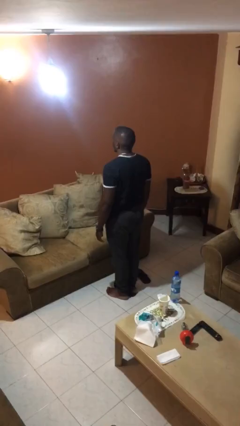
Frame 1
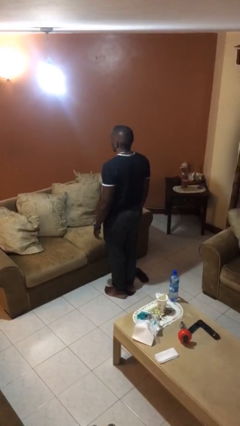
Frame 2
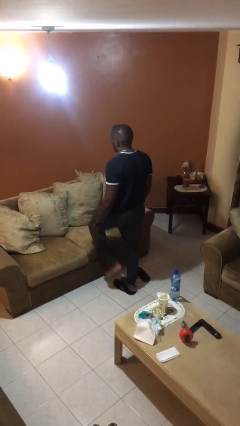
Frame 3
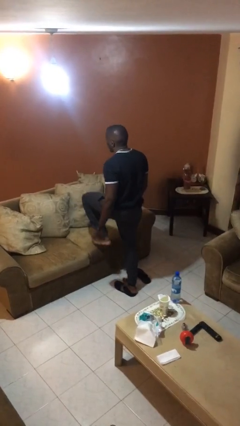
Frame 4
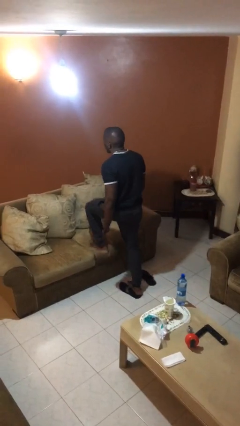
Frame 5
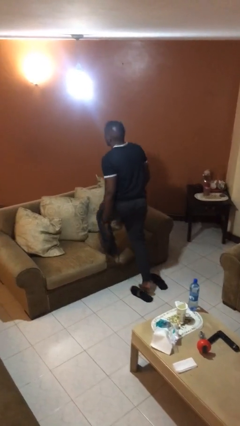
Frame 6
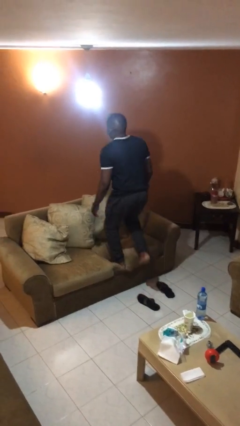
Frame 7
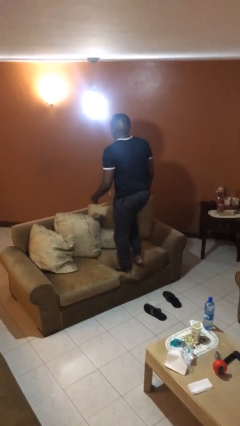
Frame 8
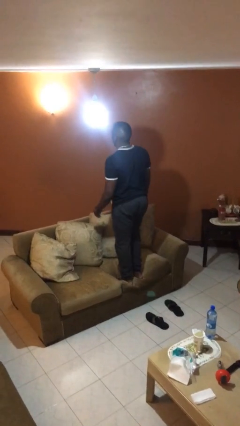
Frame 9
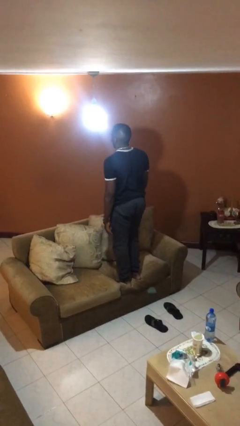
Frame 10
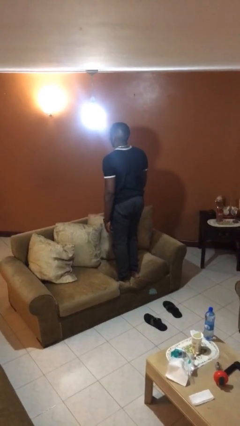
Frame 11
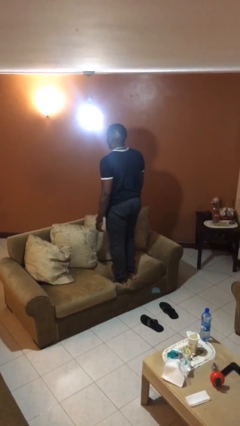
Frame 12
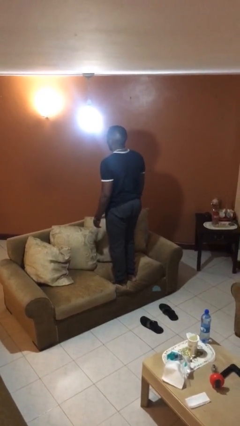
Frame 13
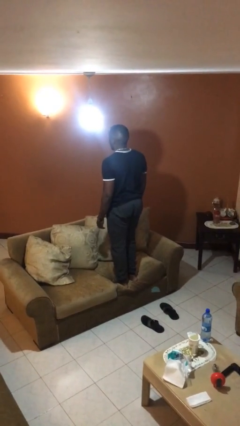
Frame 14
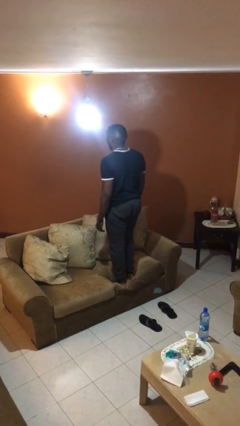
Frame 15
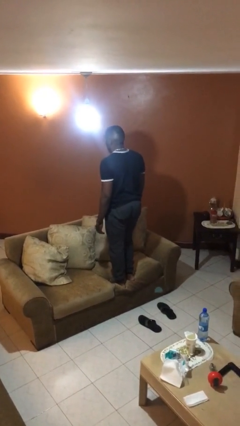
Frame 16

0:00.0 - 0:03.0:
person climbs on chair

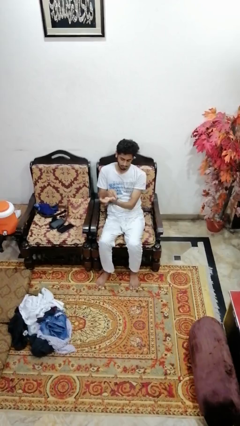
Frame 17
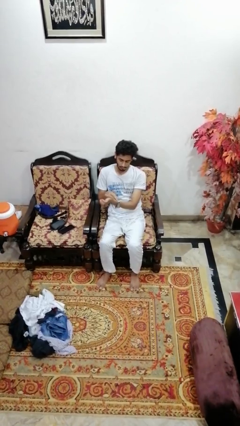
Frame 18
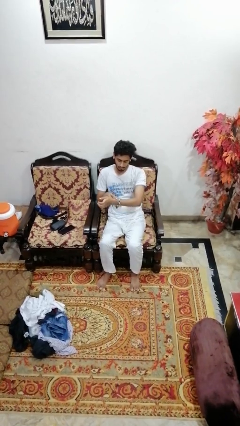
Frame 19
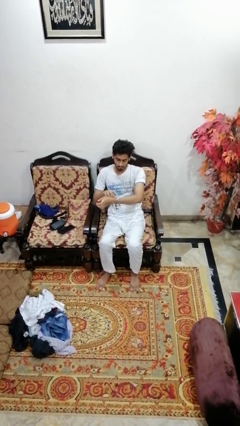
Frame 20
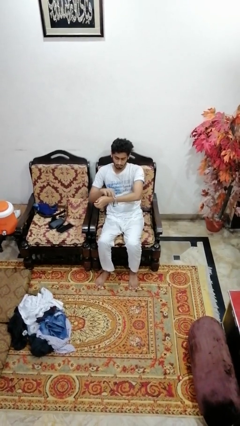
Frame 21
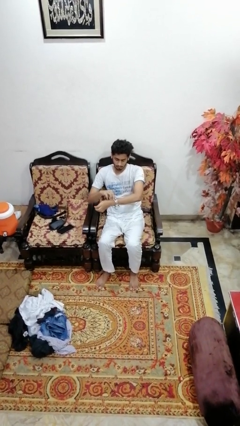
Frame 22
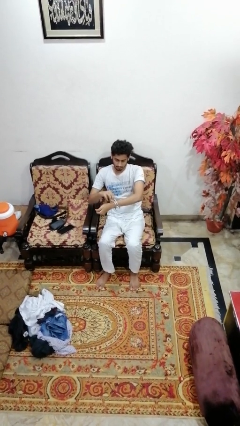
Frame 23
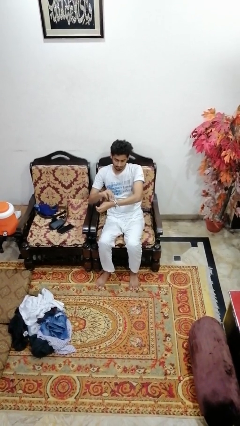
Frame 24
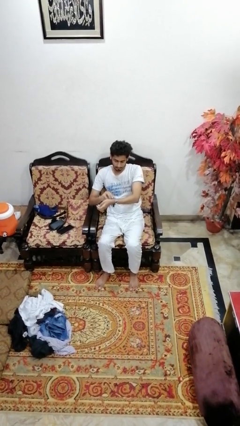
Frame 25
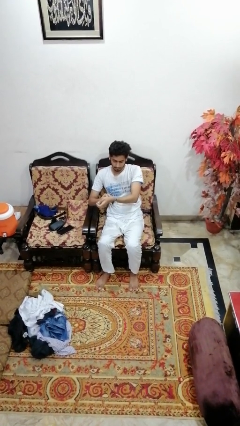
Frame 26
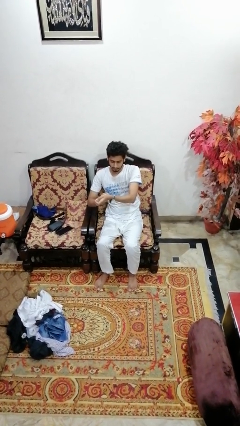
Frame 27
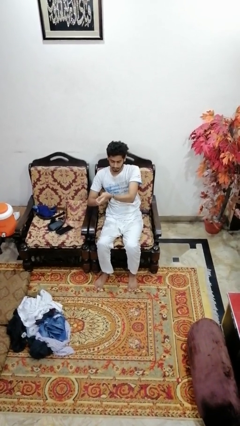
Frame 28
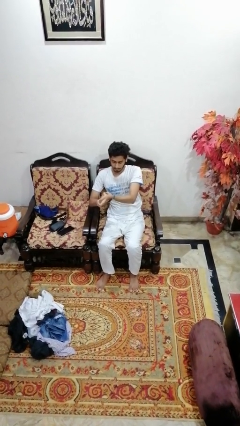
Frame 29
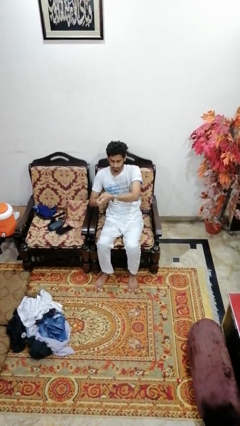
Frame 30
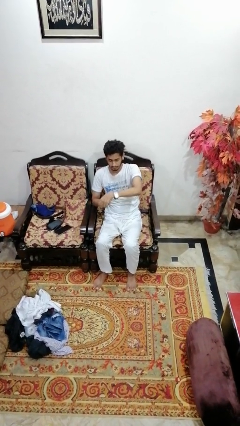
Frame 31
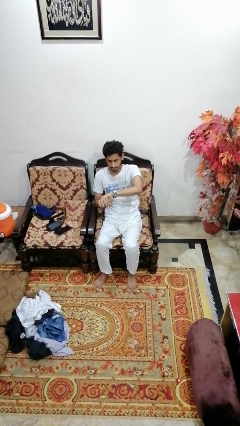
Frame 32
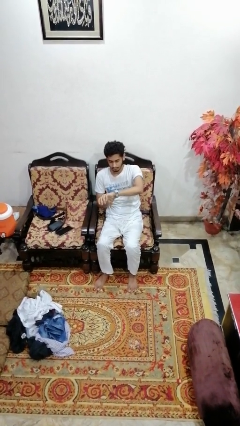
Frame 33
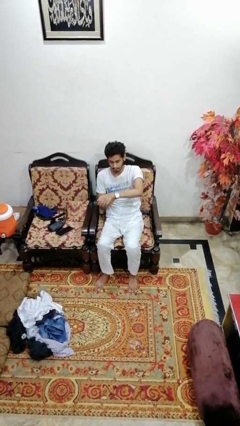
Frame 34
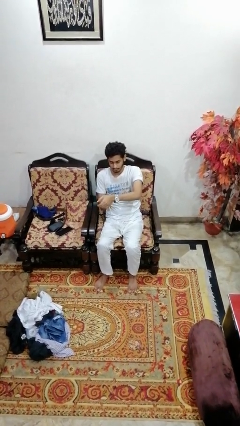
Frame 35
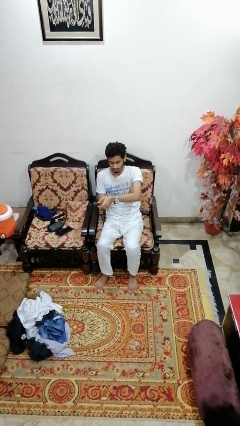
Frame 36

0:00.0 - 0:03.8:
person puts on wristwatch

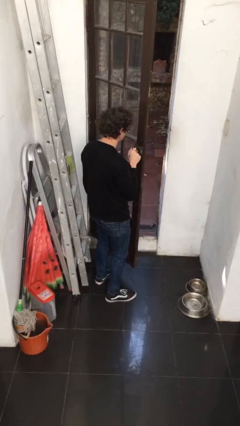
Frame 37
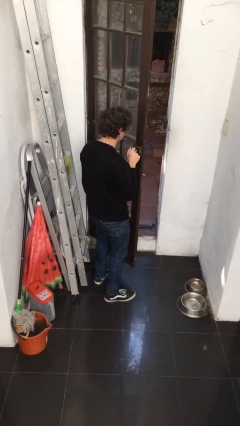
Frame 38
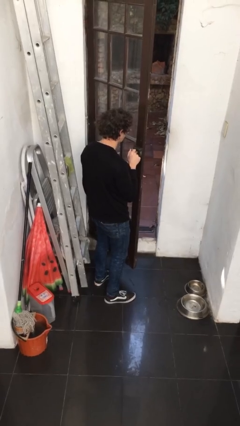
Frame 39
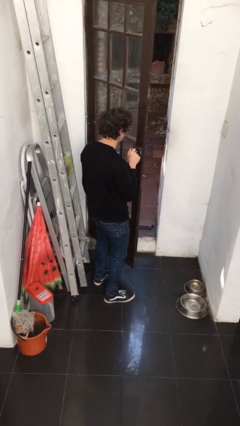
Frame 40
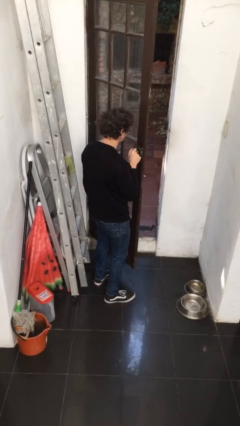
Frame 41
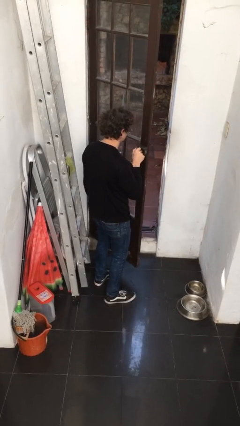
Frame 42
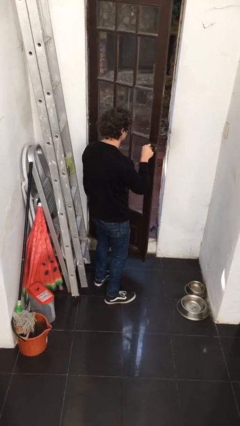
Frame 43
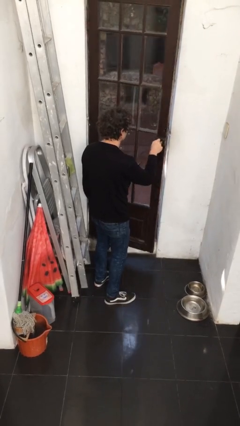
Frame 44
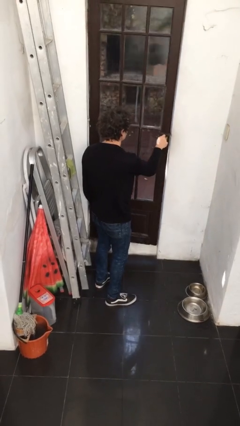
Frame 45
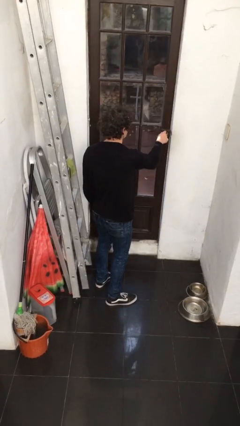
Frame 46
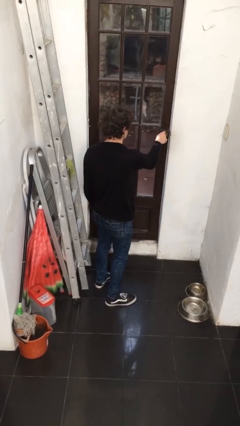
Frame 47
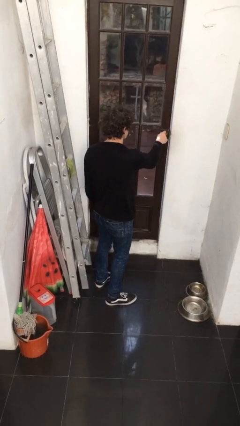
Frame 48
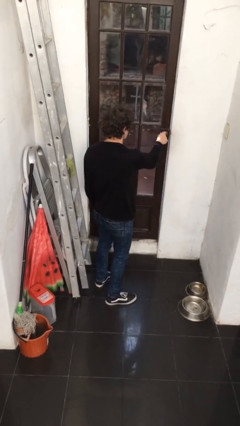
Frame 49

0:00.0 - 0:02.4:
person closes facility door

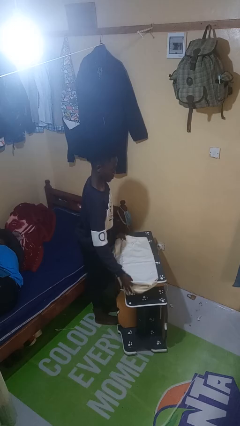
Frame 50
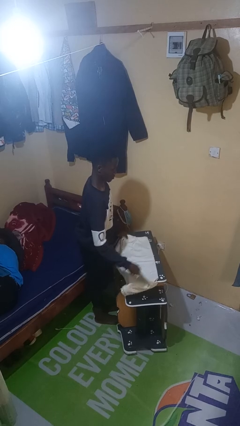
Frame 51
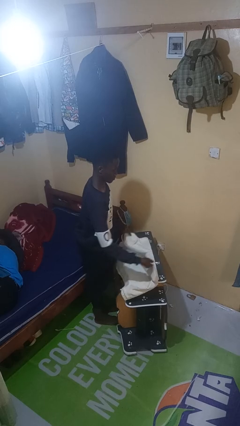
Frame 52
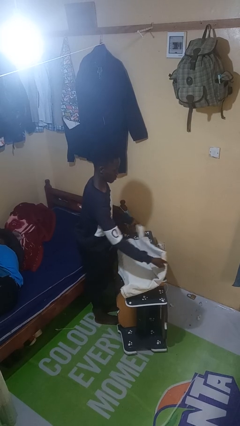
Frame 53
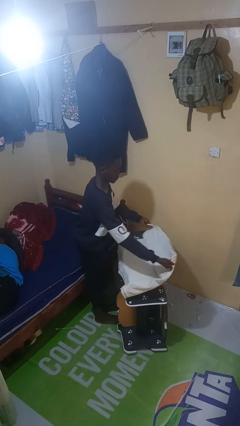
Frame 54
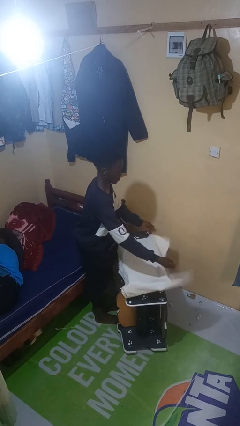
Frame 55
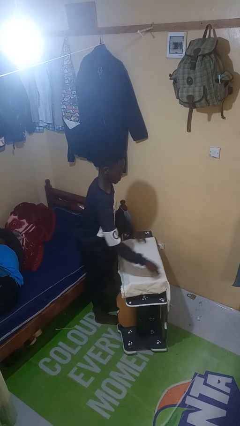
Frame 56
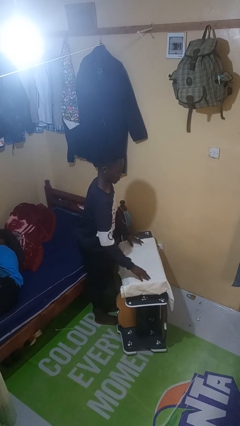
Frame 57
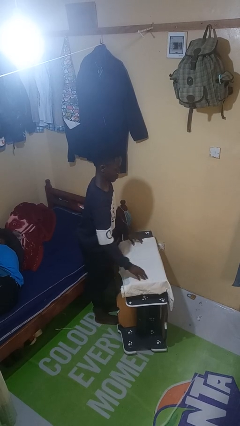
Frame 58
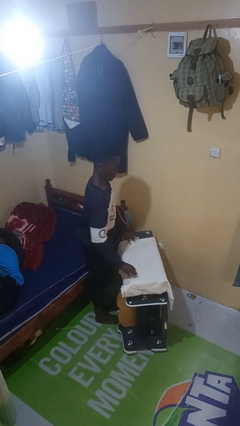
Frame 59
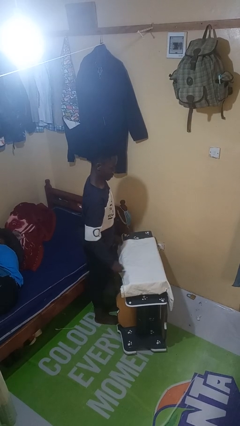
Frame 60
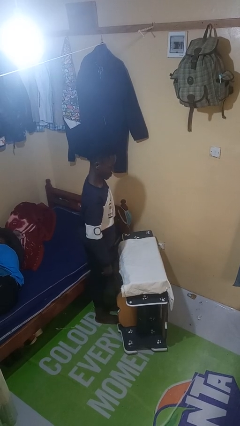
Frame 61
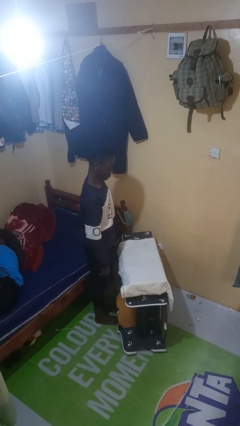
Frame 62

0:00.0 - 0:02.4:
person spreads tablecloth

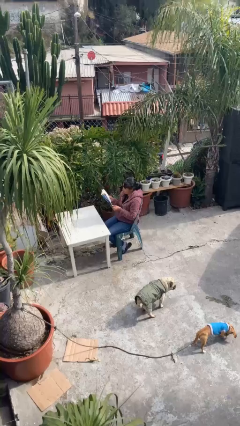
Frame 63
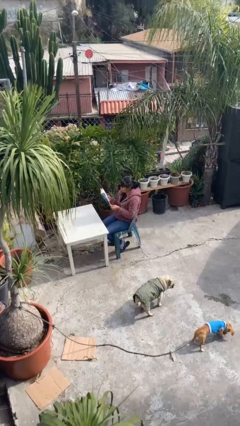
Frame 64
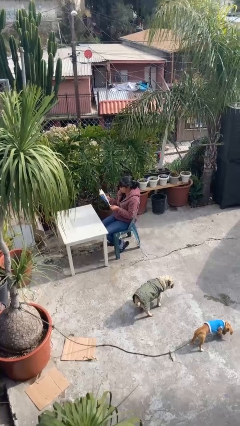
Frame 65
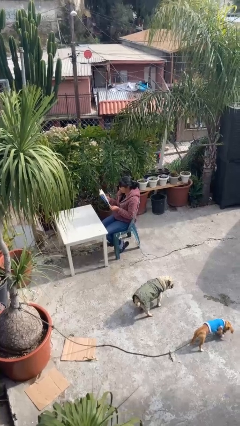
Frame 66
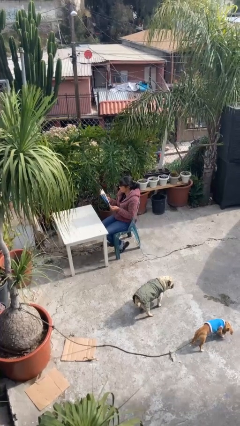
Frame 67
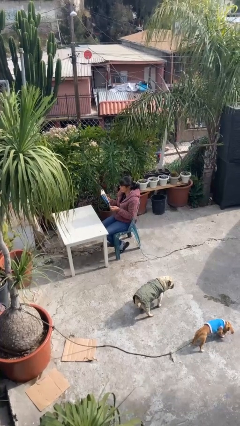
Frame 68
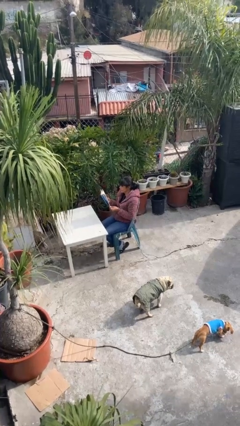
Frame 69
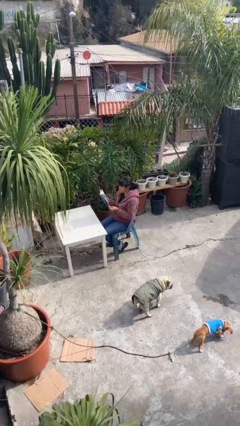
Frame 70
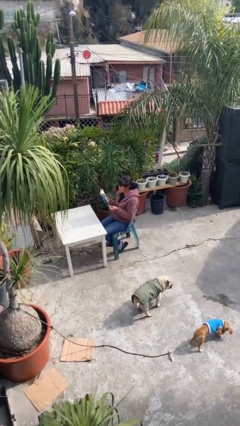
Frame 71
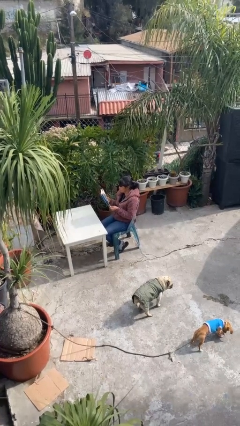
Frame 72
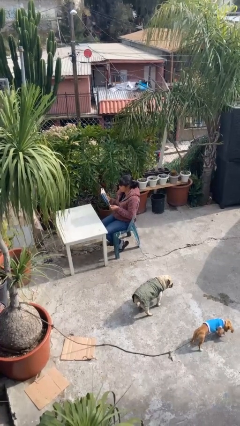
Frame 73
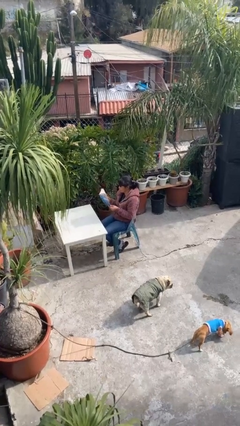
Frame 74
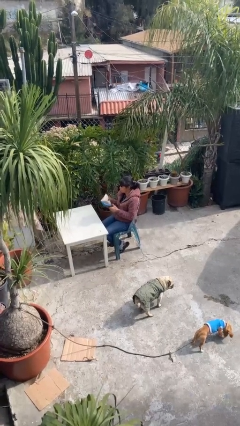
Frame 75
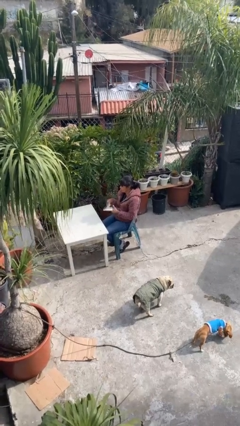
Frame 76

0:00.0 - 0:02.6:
person reads document

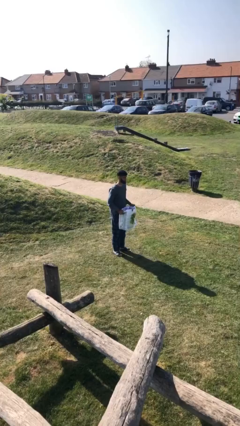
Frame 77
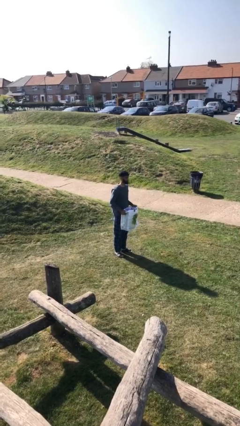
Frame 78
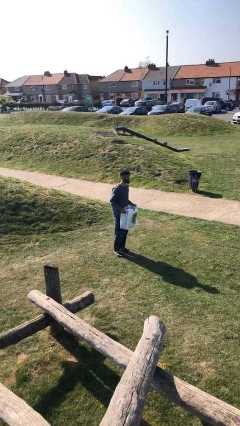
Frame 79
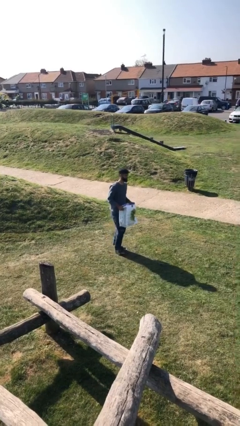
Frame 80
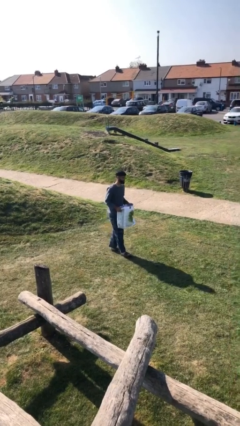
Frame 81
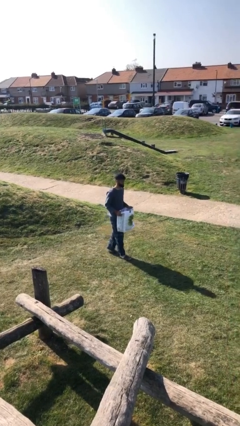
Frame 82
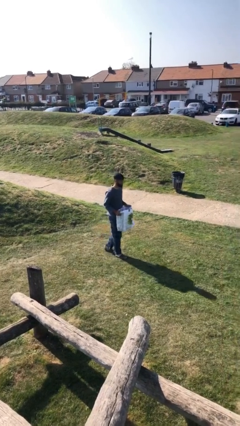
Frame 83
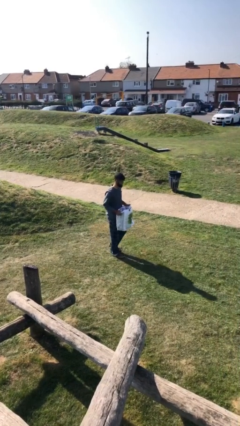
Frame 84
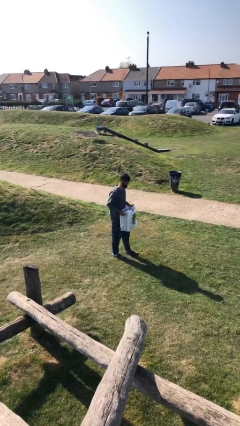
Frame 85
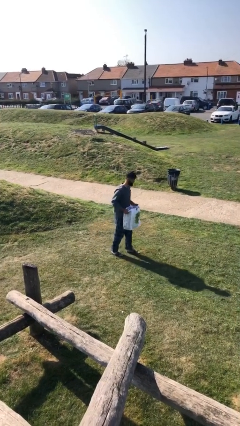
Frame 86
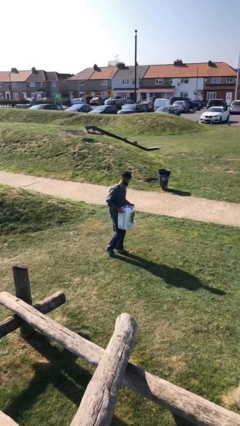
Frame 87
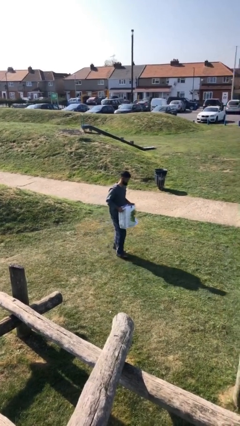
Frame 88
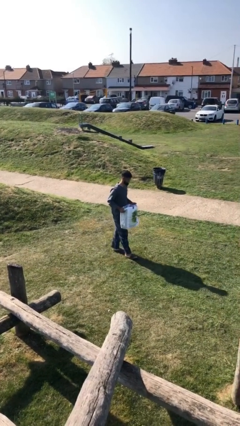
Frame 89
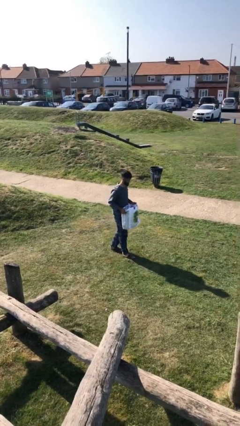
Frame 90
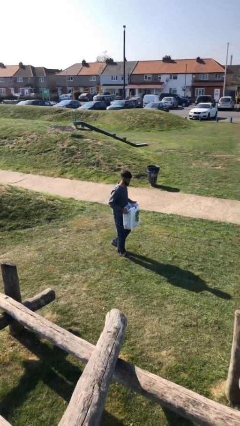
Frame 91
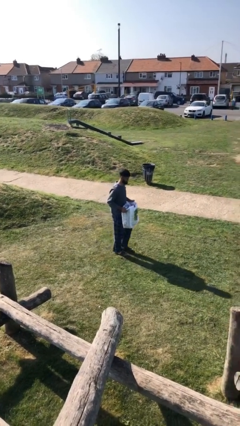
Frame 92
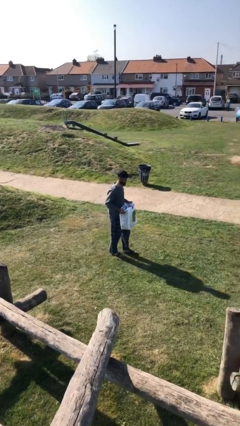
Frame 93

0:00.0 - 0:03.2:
person carries heavy object

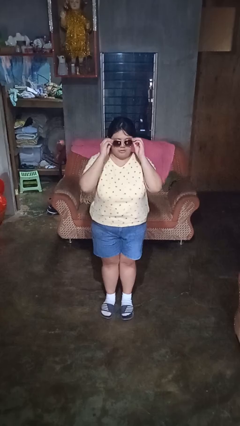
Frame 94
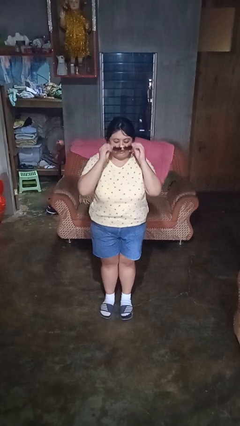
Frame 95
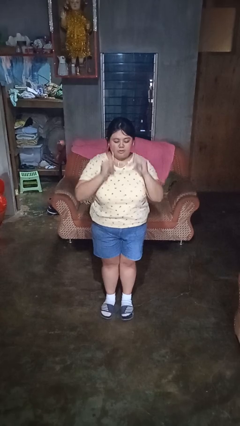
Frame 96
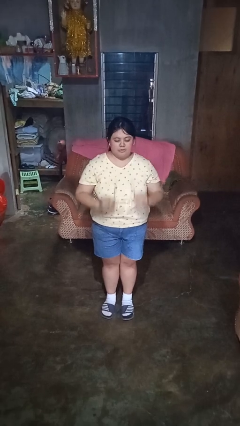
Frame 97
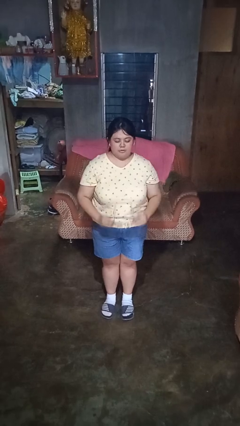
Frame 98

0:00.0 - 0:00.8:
person takes off sunglasses
